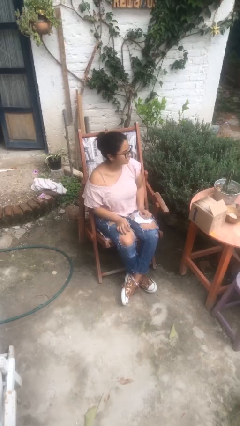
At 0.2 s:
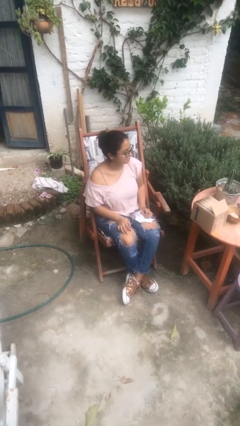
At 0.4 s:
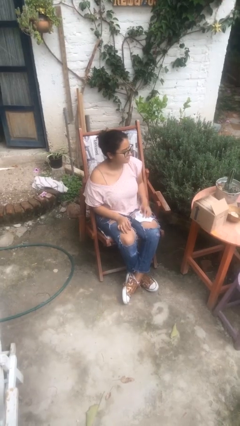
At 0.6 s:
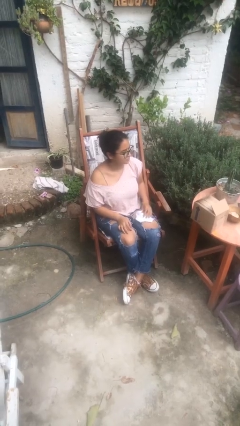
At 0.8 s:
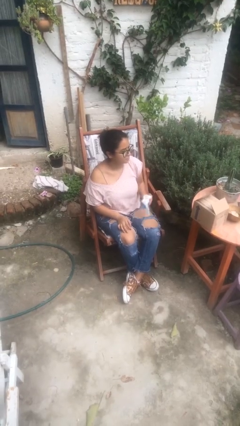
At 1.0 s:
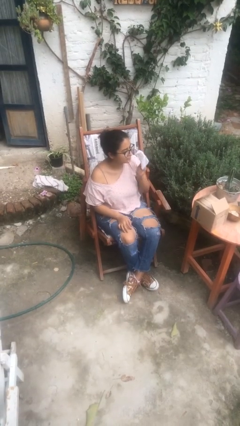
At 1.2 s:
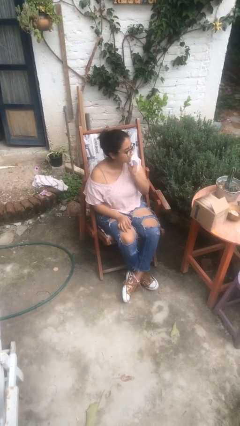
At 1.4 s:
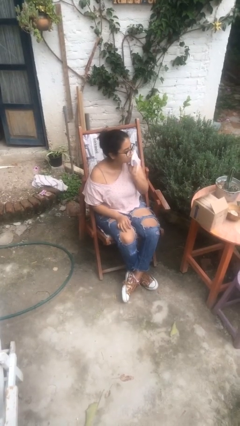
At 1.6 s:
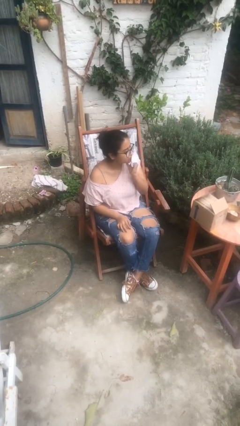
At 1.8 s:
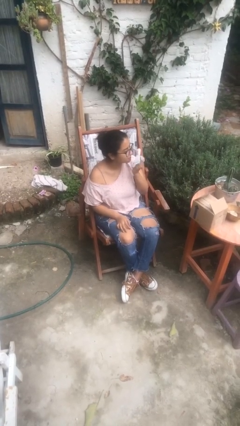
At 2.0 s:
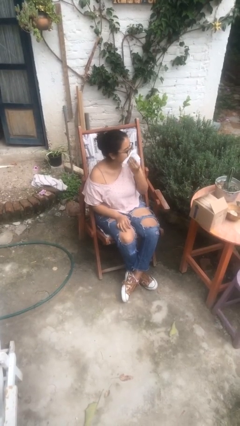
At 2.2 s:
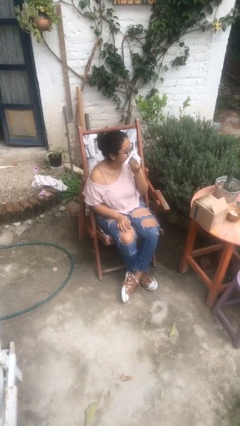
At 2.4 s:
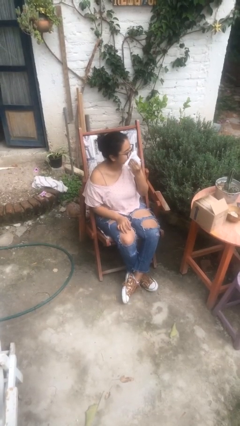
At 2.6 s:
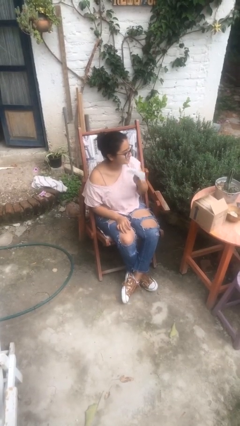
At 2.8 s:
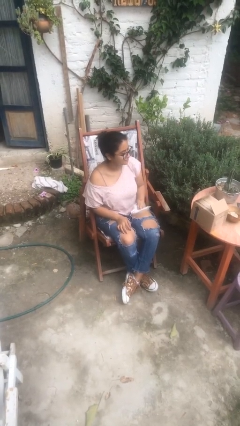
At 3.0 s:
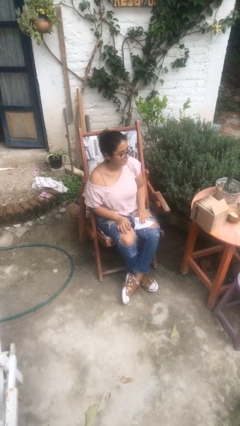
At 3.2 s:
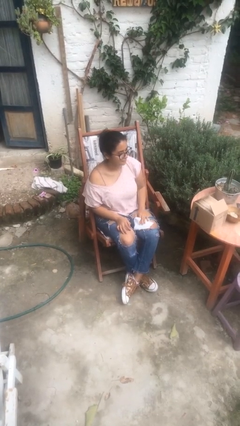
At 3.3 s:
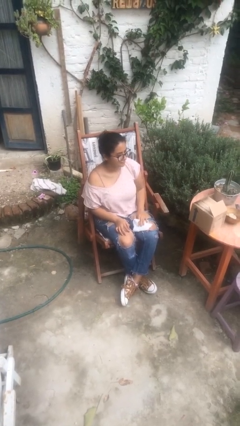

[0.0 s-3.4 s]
person wipes mouth with napkin

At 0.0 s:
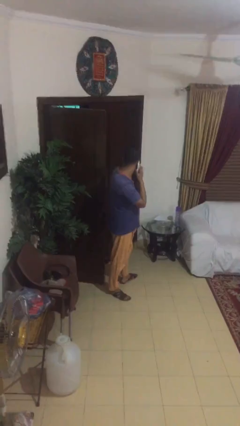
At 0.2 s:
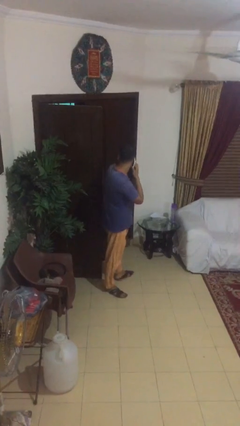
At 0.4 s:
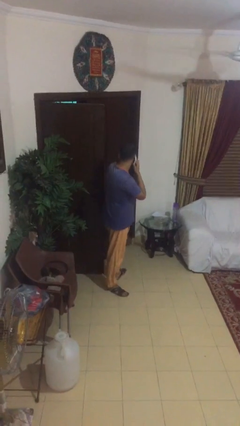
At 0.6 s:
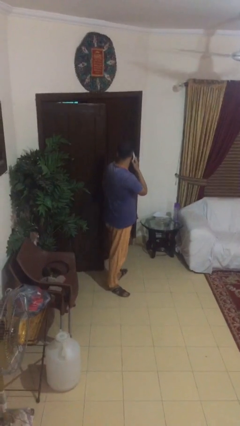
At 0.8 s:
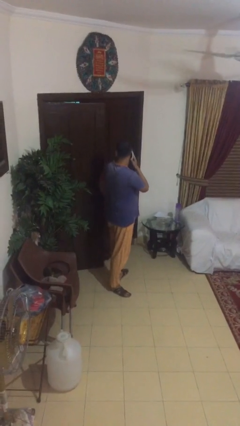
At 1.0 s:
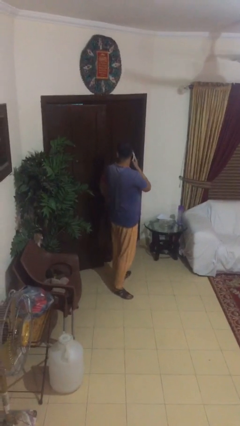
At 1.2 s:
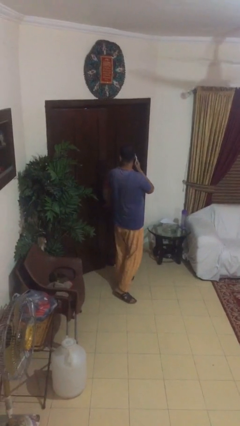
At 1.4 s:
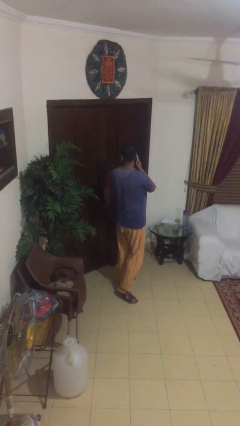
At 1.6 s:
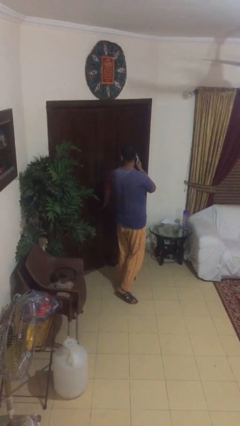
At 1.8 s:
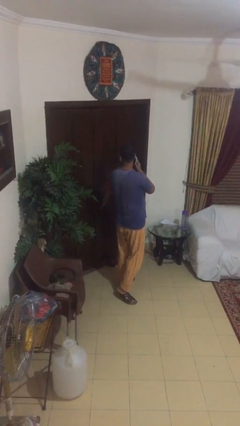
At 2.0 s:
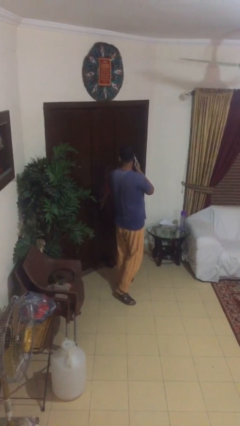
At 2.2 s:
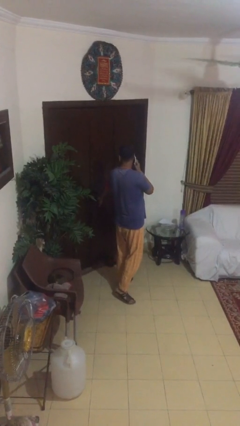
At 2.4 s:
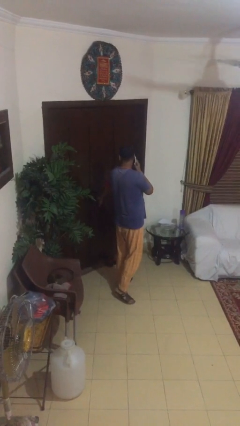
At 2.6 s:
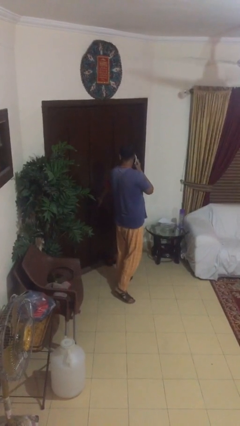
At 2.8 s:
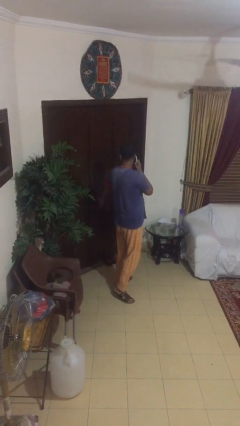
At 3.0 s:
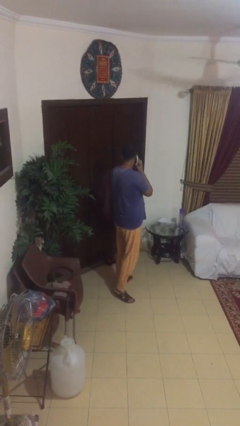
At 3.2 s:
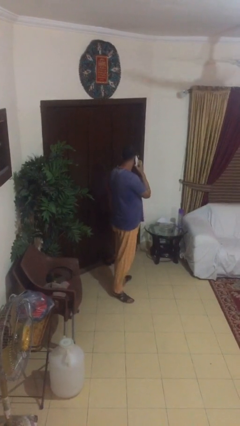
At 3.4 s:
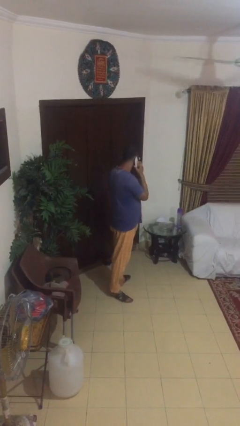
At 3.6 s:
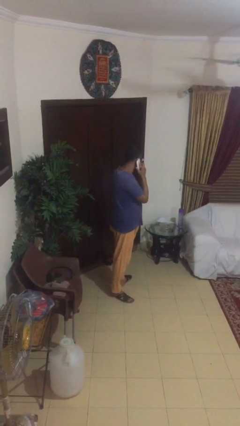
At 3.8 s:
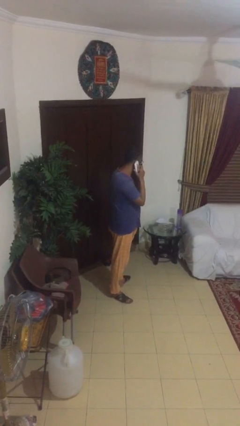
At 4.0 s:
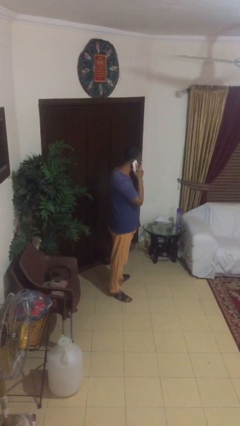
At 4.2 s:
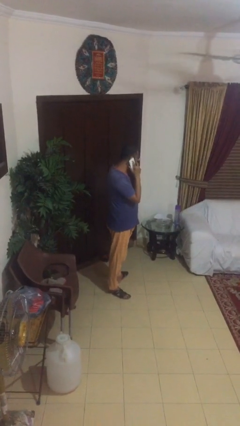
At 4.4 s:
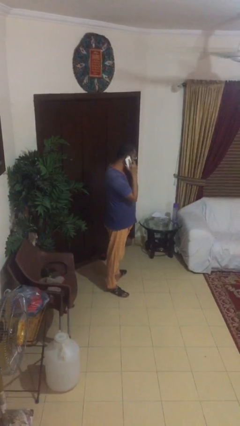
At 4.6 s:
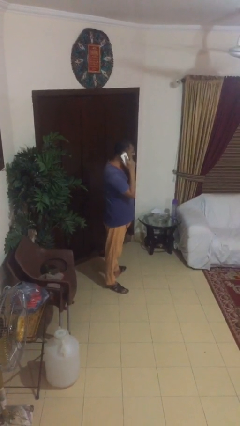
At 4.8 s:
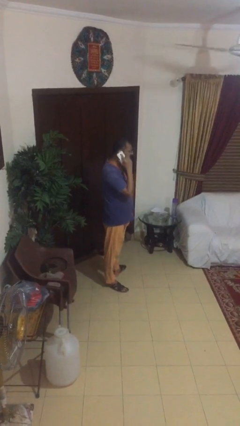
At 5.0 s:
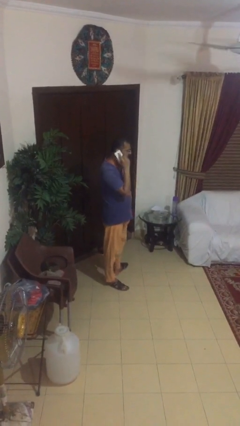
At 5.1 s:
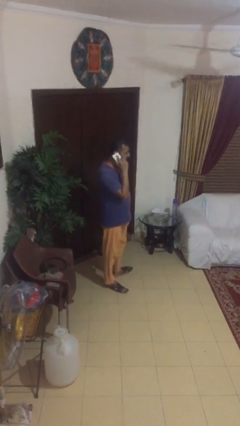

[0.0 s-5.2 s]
person closes facility door

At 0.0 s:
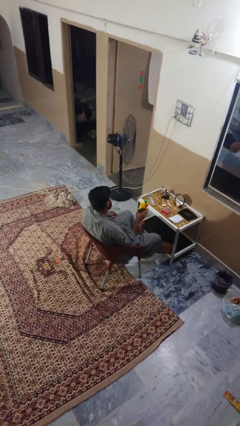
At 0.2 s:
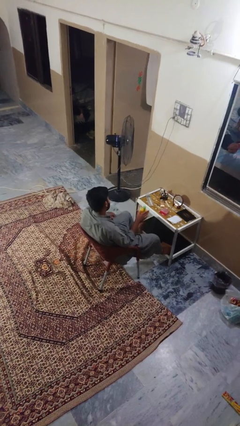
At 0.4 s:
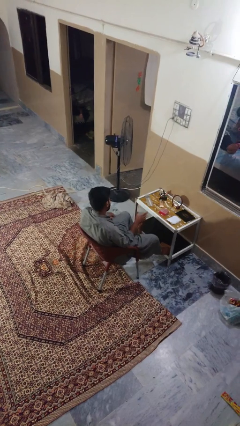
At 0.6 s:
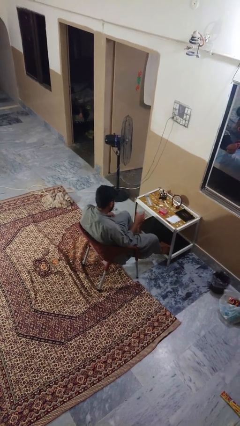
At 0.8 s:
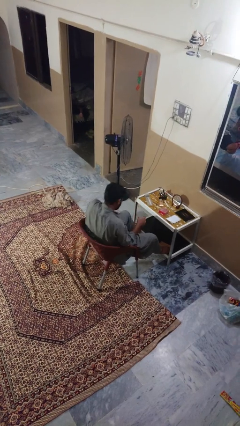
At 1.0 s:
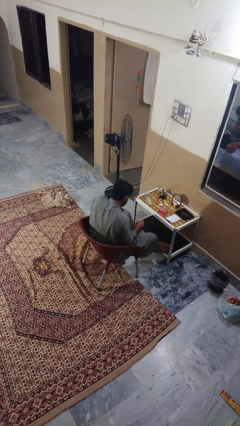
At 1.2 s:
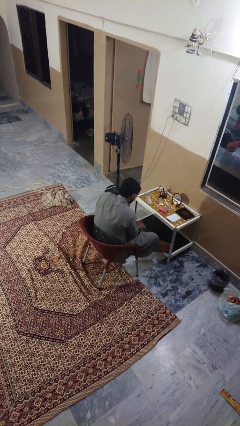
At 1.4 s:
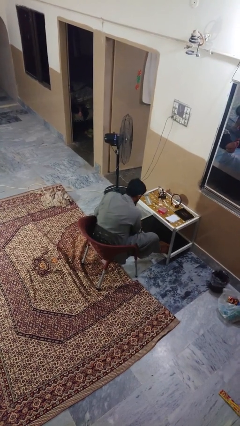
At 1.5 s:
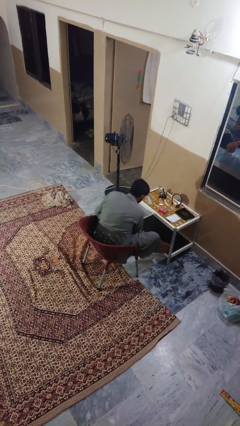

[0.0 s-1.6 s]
person throws object to ground

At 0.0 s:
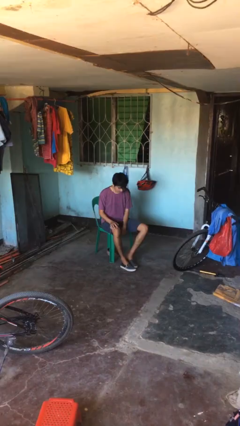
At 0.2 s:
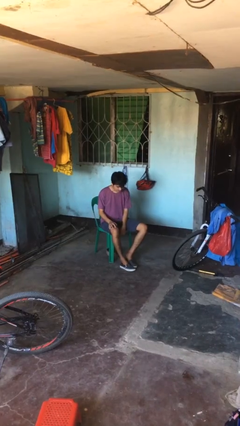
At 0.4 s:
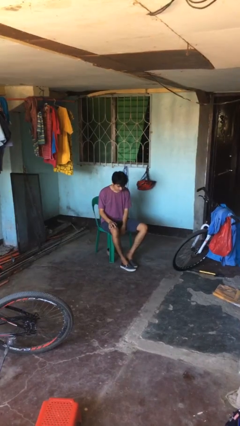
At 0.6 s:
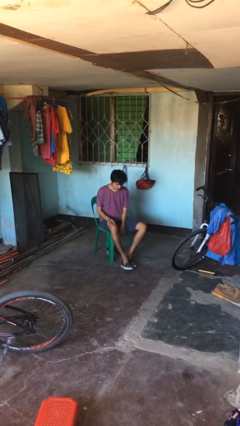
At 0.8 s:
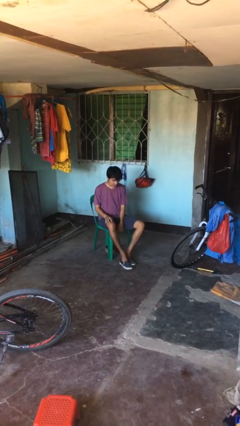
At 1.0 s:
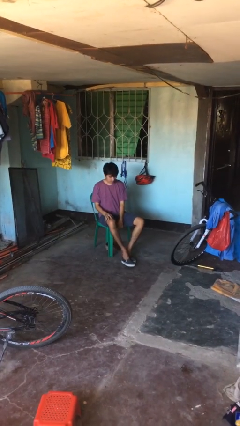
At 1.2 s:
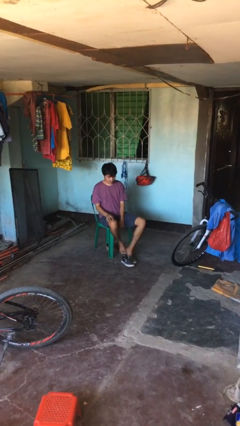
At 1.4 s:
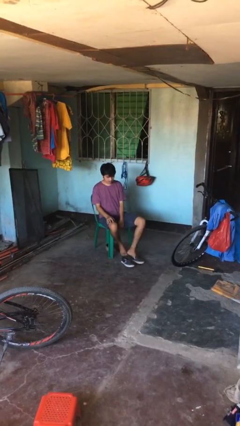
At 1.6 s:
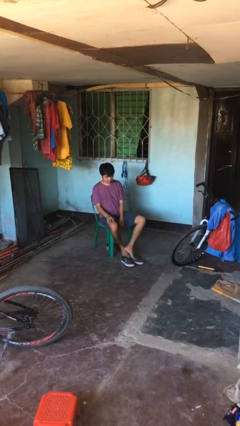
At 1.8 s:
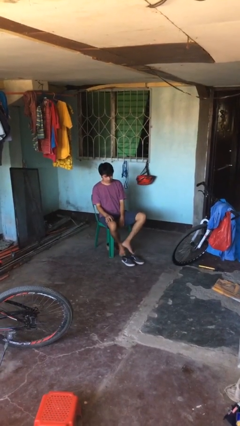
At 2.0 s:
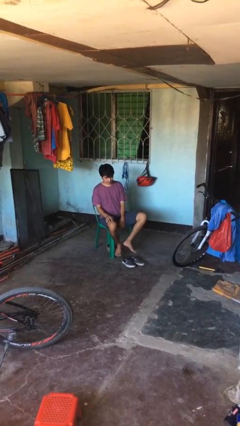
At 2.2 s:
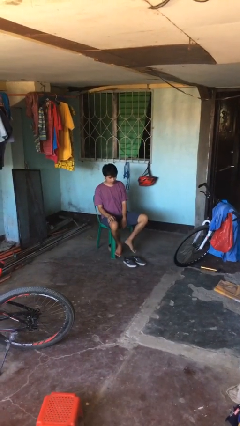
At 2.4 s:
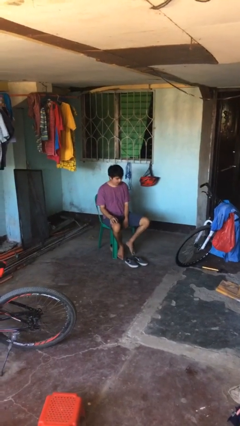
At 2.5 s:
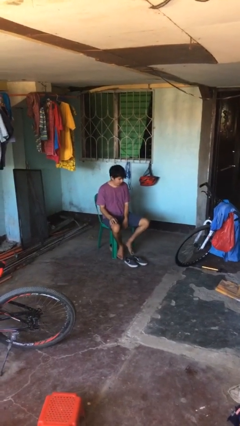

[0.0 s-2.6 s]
person takes off shoes

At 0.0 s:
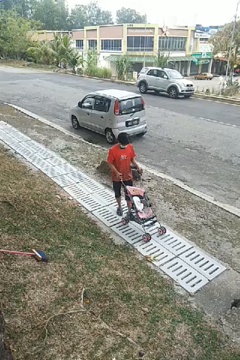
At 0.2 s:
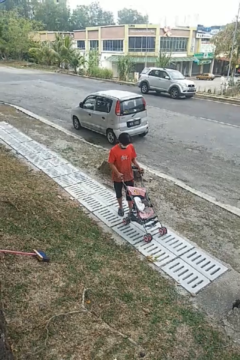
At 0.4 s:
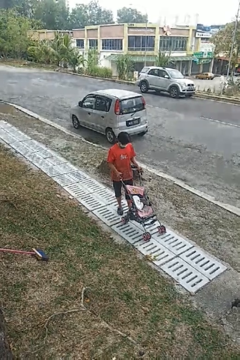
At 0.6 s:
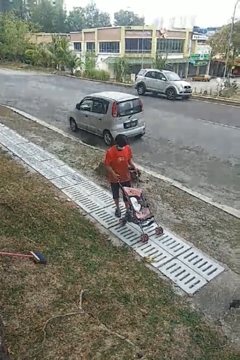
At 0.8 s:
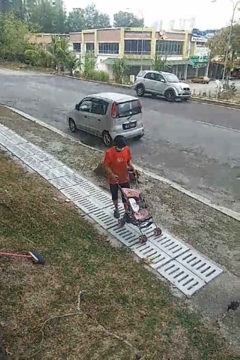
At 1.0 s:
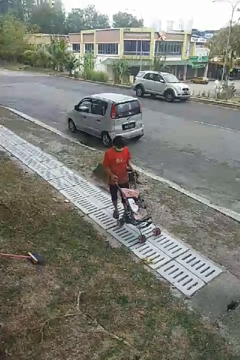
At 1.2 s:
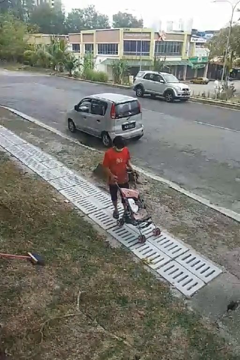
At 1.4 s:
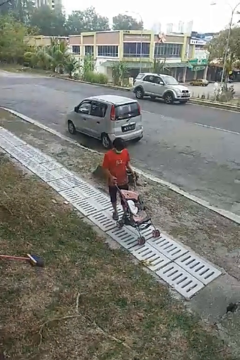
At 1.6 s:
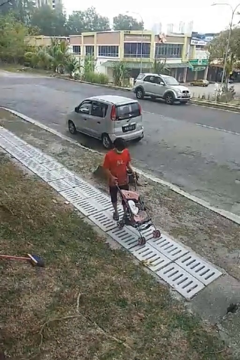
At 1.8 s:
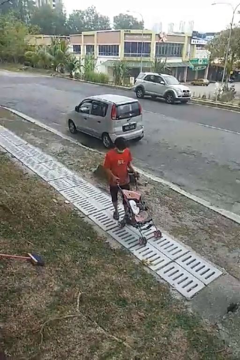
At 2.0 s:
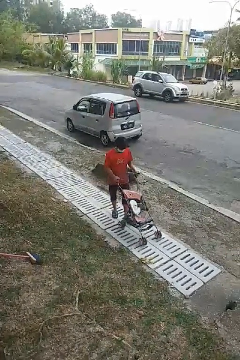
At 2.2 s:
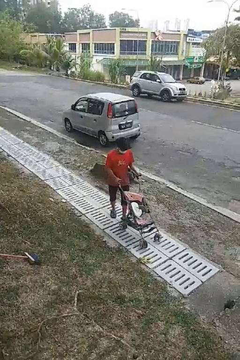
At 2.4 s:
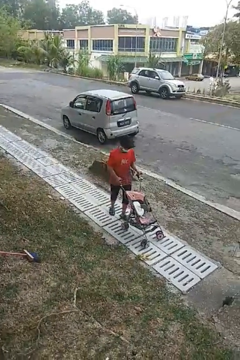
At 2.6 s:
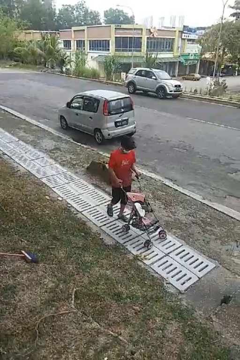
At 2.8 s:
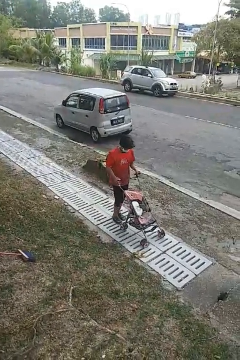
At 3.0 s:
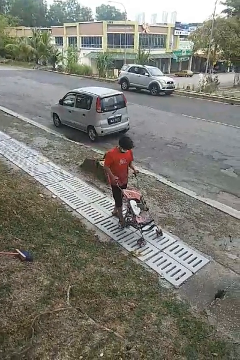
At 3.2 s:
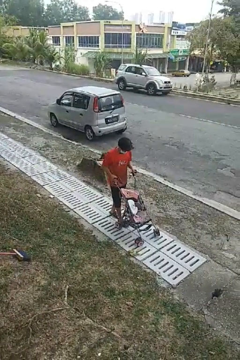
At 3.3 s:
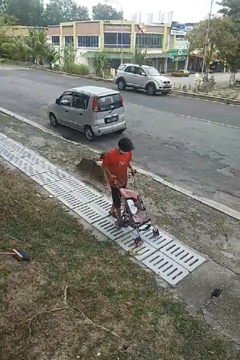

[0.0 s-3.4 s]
person pushes wheeled cart

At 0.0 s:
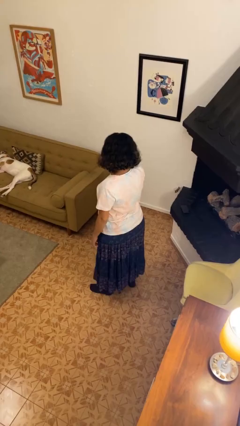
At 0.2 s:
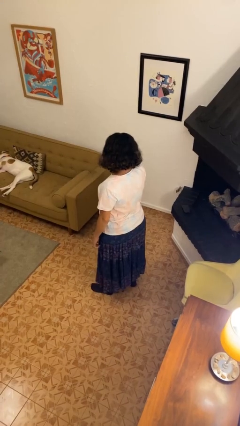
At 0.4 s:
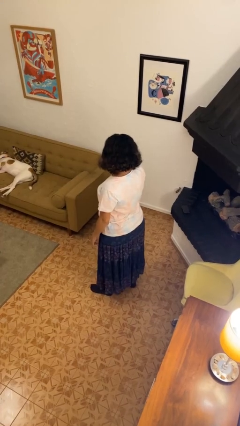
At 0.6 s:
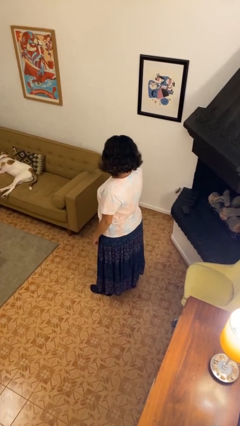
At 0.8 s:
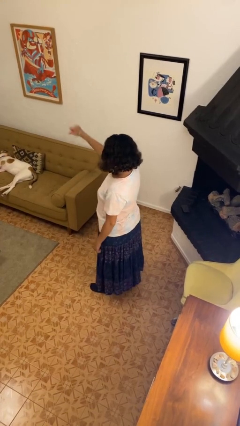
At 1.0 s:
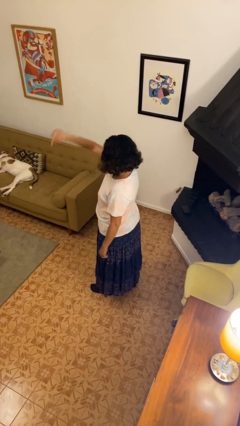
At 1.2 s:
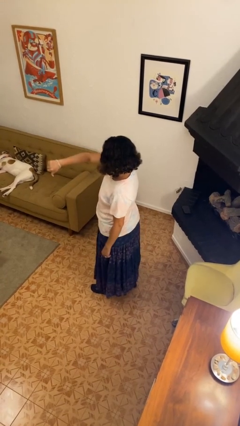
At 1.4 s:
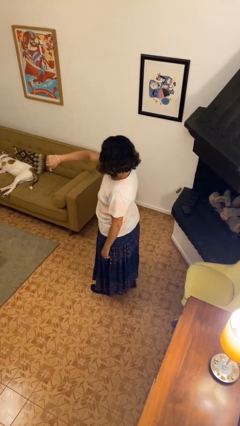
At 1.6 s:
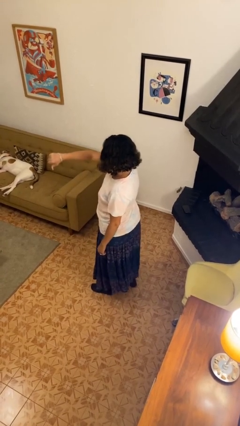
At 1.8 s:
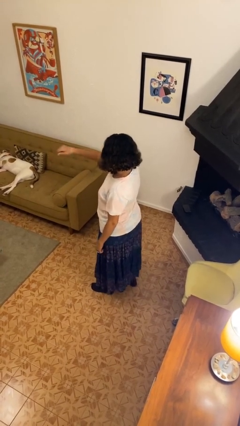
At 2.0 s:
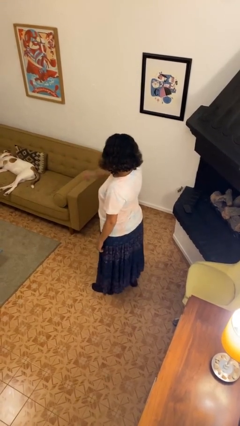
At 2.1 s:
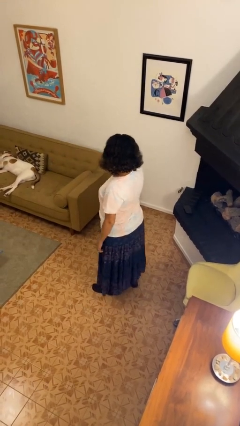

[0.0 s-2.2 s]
person gestures thumbs down
